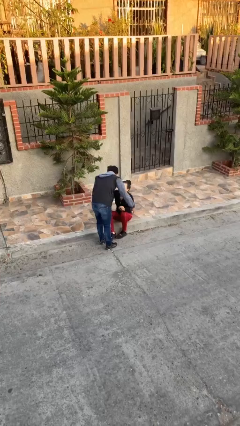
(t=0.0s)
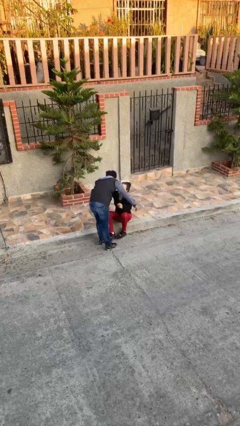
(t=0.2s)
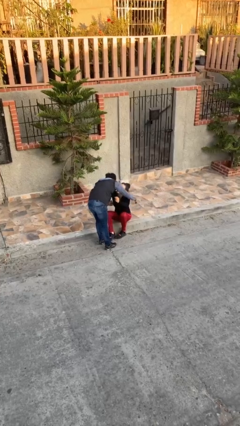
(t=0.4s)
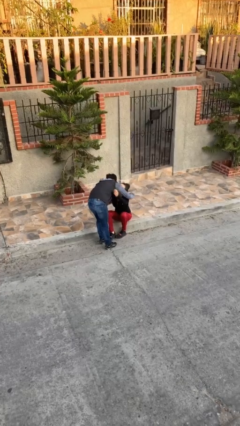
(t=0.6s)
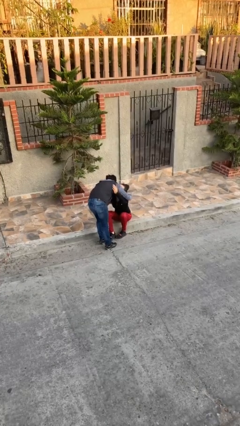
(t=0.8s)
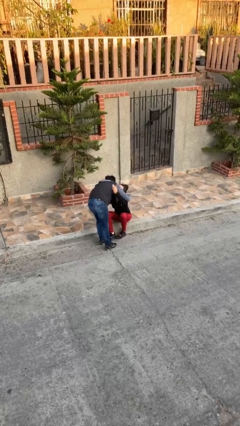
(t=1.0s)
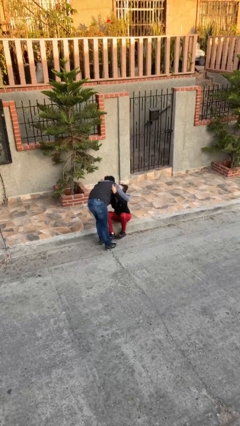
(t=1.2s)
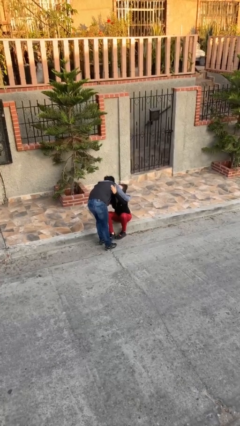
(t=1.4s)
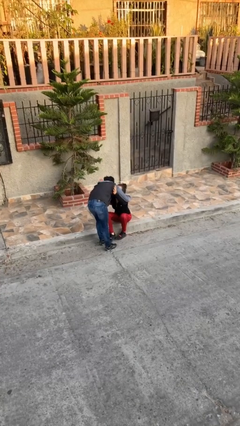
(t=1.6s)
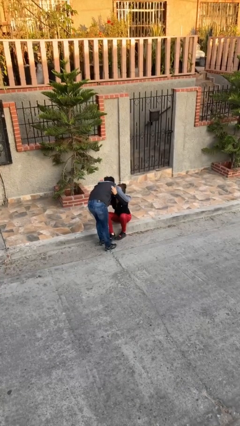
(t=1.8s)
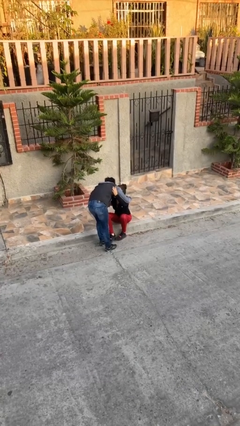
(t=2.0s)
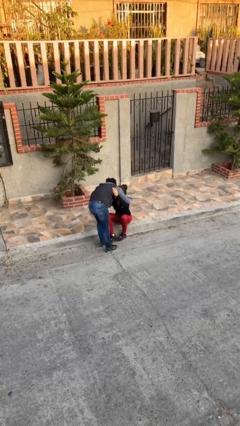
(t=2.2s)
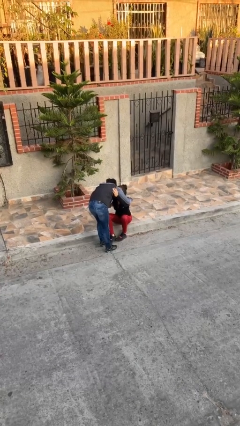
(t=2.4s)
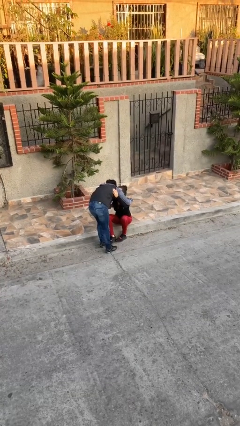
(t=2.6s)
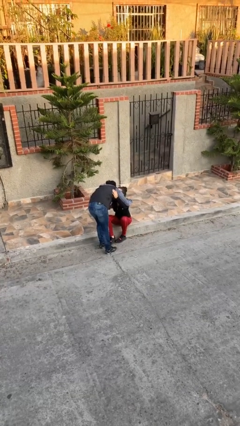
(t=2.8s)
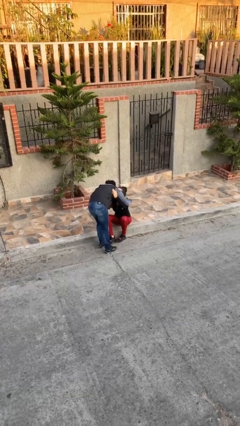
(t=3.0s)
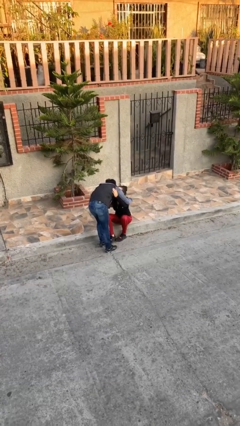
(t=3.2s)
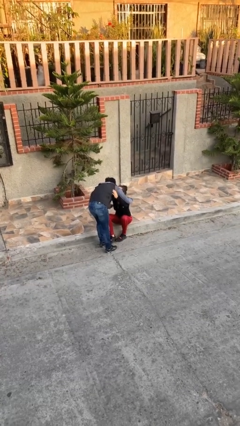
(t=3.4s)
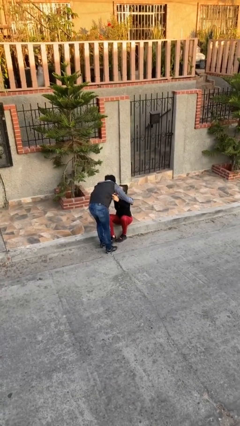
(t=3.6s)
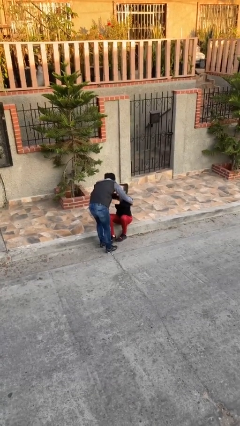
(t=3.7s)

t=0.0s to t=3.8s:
person embraces person

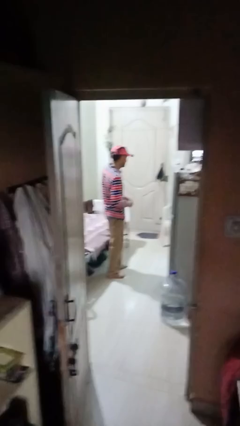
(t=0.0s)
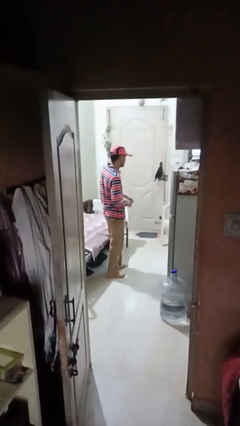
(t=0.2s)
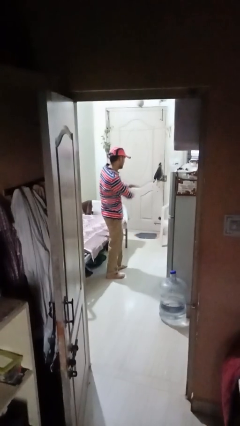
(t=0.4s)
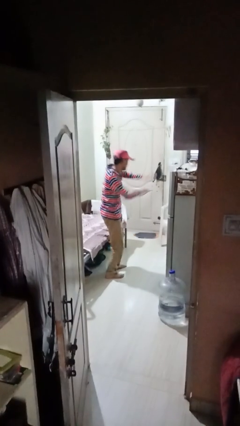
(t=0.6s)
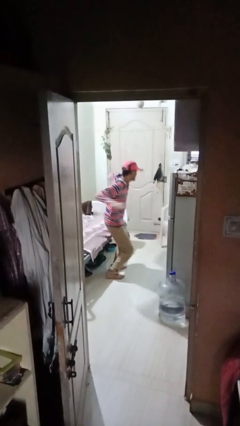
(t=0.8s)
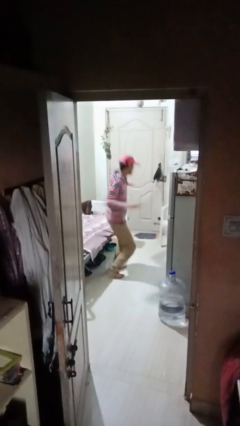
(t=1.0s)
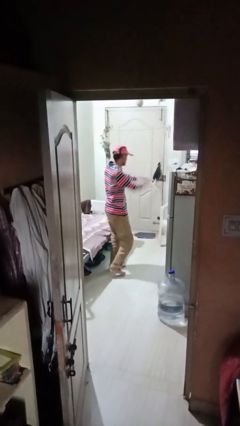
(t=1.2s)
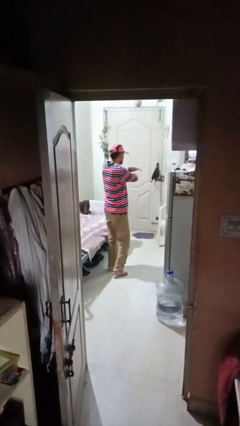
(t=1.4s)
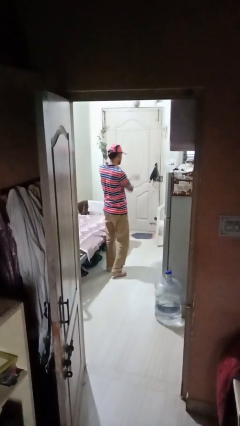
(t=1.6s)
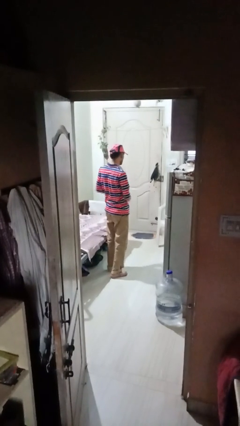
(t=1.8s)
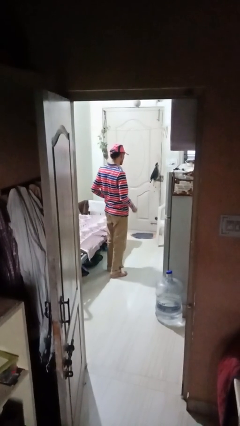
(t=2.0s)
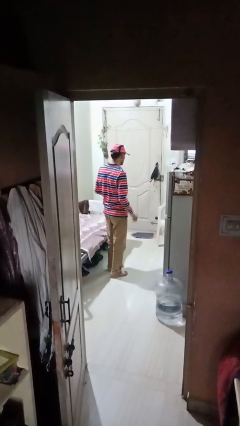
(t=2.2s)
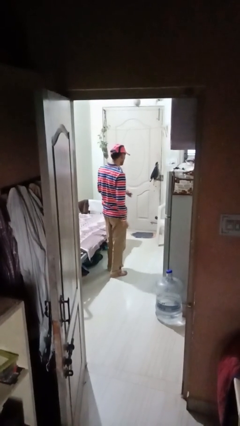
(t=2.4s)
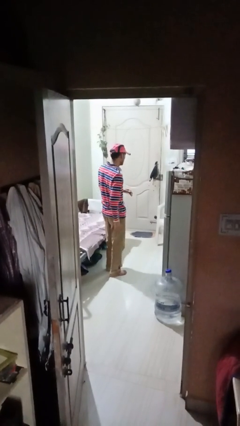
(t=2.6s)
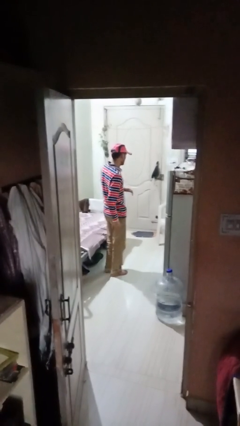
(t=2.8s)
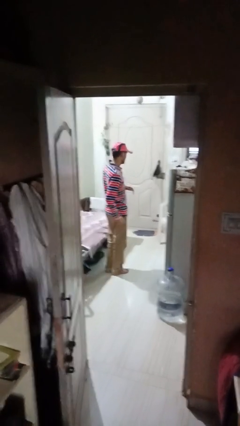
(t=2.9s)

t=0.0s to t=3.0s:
person karate chop

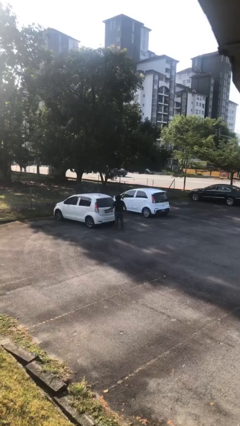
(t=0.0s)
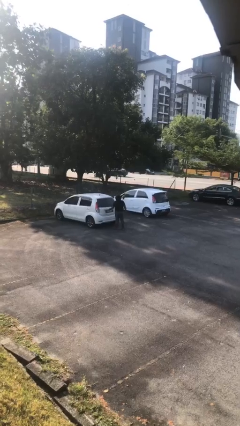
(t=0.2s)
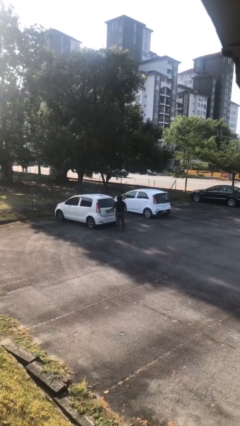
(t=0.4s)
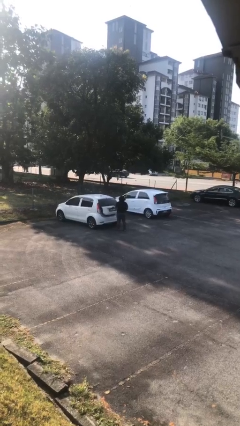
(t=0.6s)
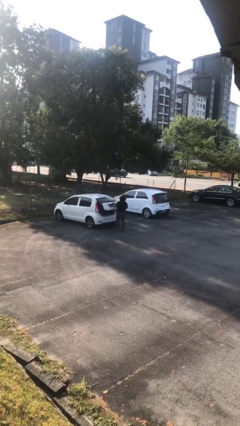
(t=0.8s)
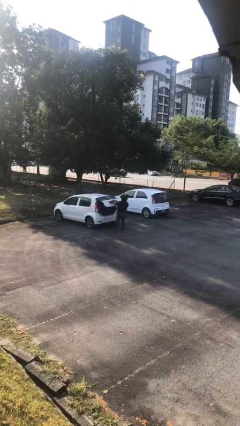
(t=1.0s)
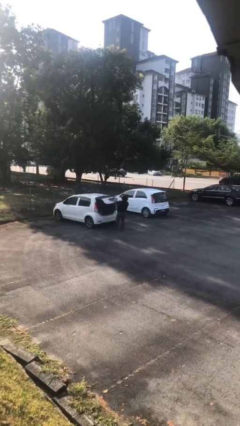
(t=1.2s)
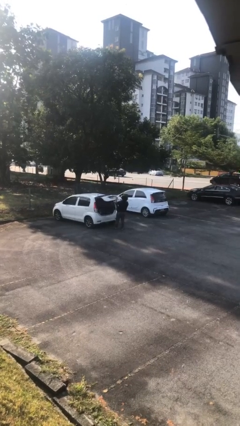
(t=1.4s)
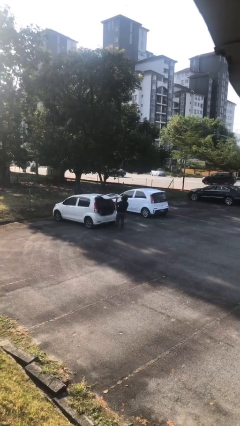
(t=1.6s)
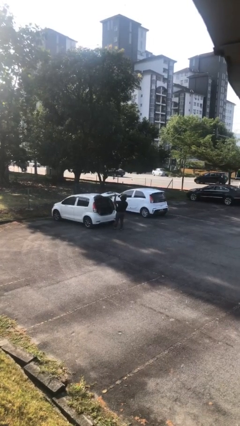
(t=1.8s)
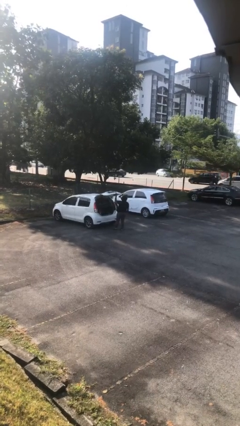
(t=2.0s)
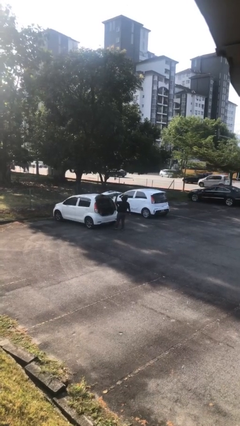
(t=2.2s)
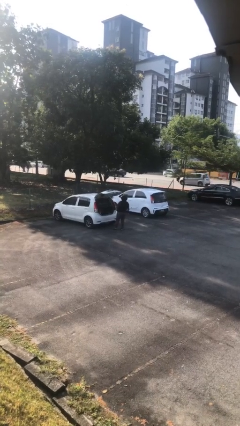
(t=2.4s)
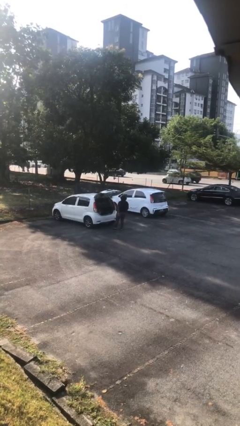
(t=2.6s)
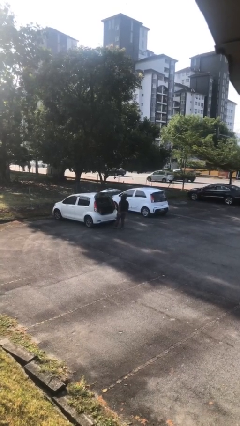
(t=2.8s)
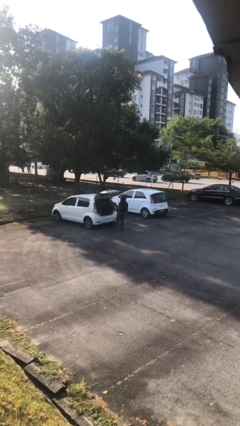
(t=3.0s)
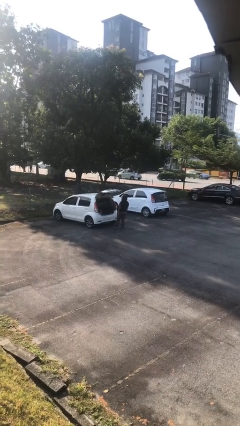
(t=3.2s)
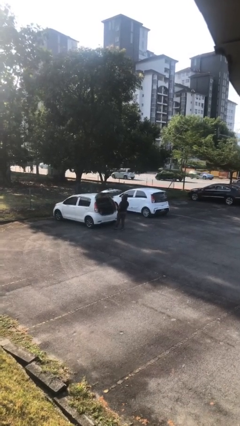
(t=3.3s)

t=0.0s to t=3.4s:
person opens car trunk

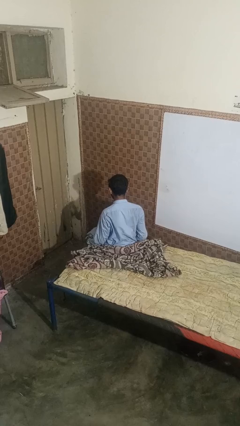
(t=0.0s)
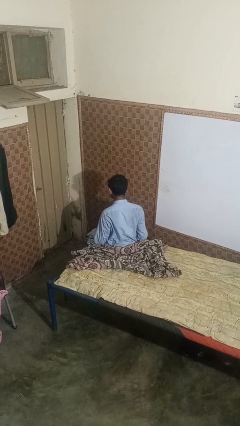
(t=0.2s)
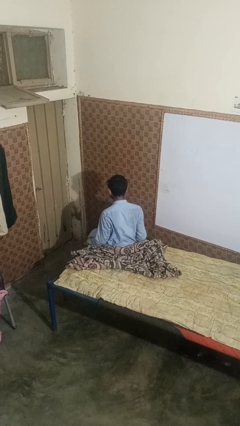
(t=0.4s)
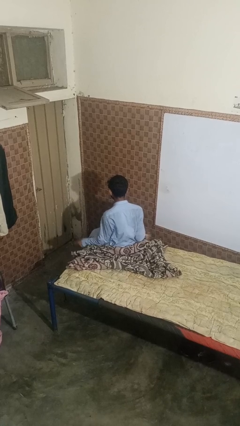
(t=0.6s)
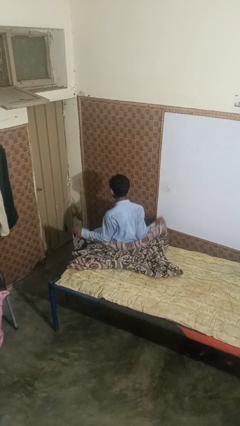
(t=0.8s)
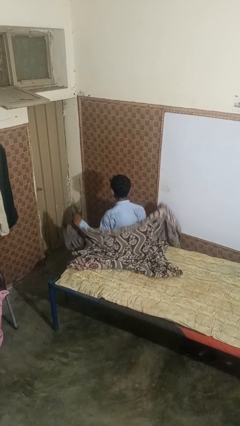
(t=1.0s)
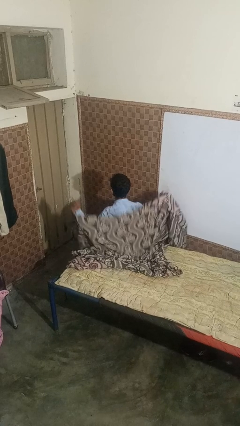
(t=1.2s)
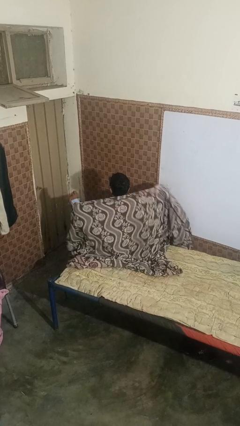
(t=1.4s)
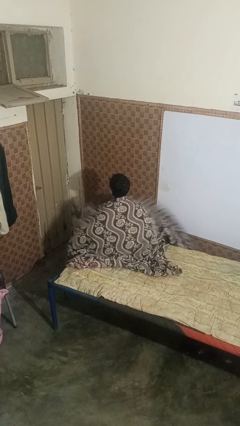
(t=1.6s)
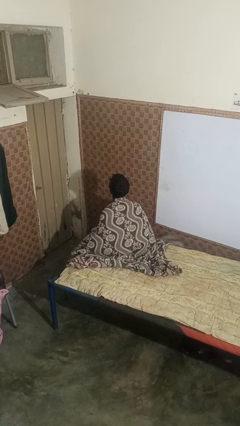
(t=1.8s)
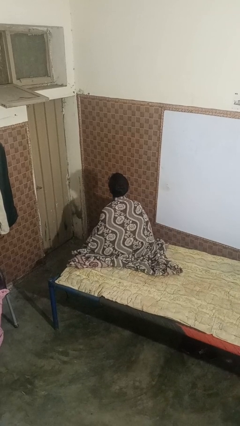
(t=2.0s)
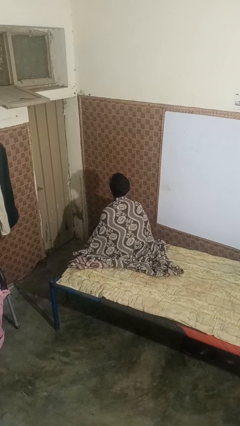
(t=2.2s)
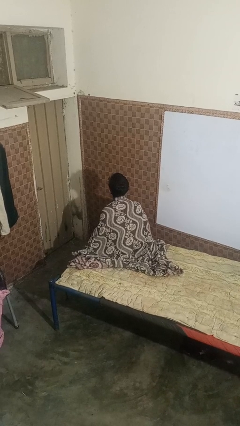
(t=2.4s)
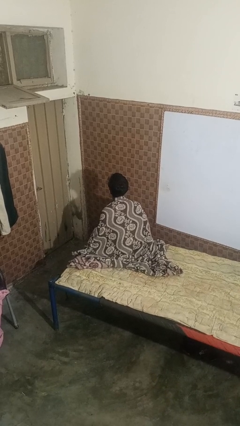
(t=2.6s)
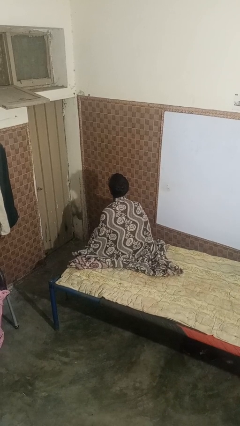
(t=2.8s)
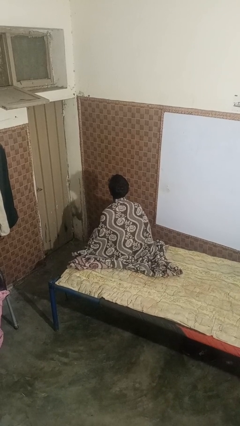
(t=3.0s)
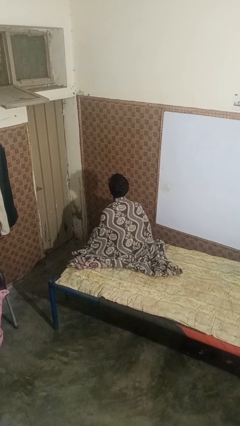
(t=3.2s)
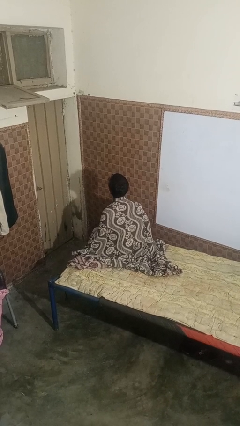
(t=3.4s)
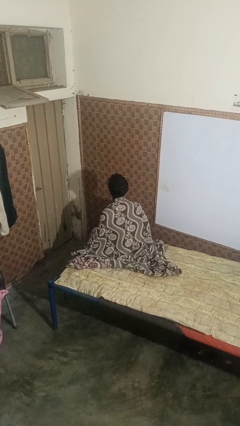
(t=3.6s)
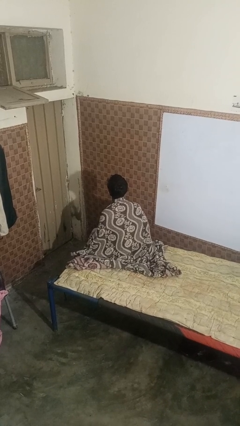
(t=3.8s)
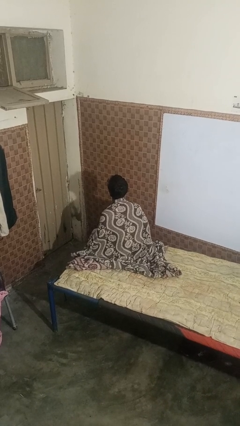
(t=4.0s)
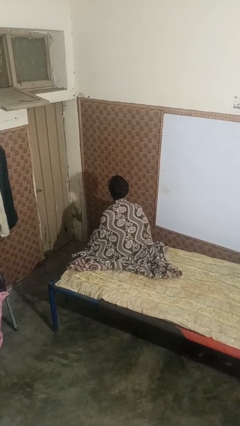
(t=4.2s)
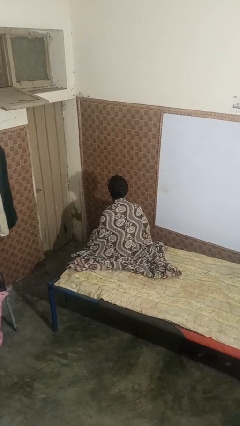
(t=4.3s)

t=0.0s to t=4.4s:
person covers with bedsheets

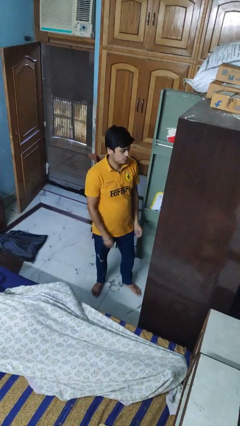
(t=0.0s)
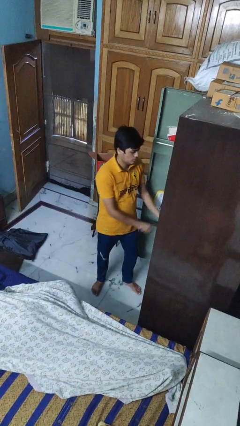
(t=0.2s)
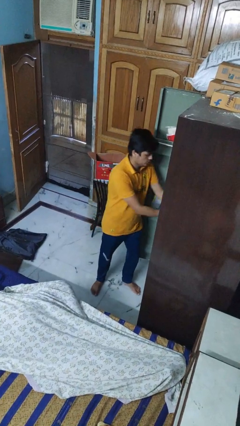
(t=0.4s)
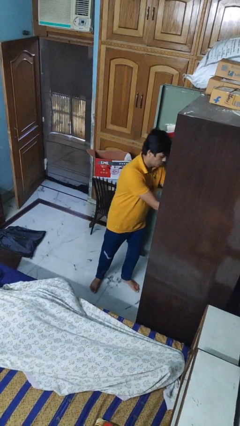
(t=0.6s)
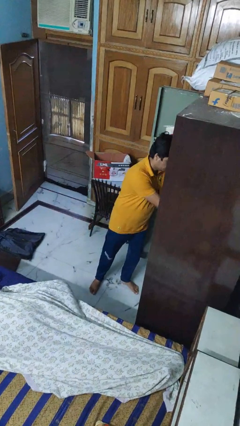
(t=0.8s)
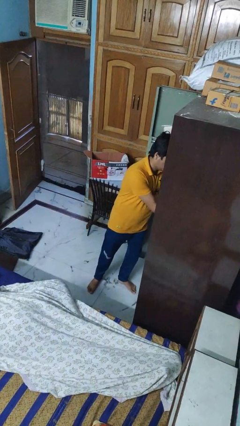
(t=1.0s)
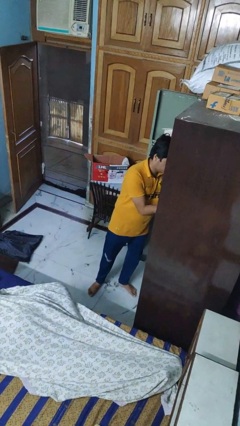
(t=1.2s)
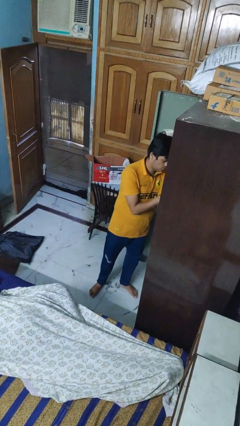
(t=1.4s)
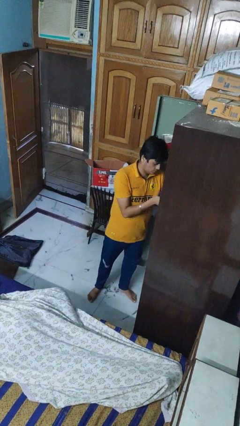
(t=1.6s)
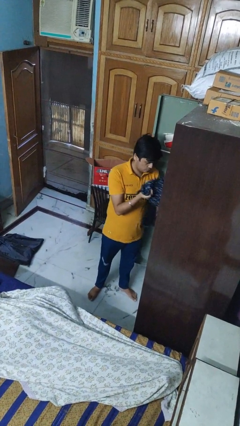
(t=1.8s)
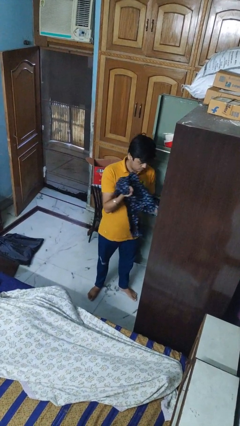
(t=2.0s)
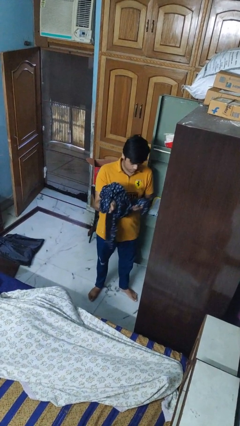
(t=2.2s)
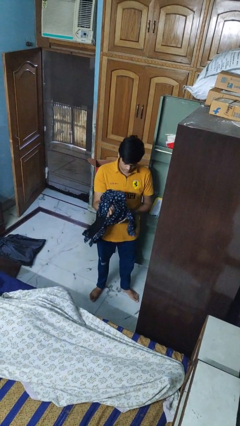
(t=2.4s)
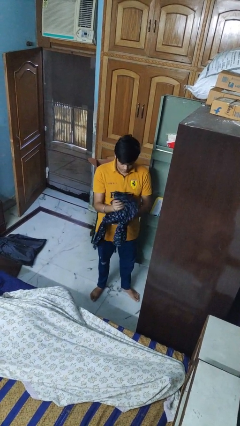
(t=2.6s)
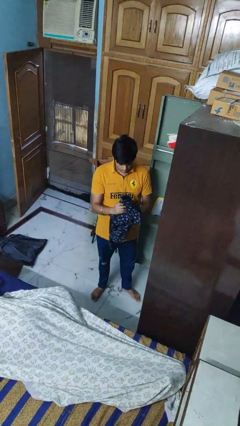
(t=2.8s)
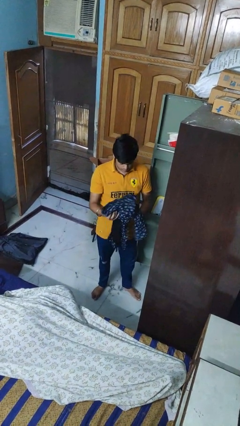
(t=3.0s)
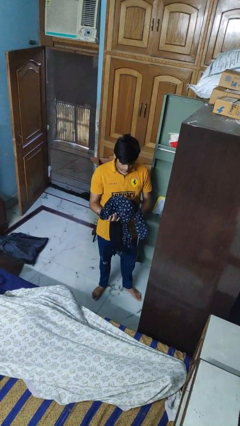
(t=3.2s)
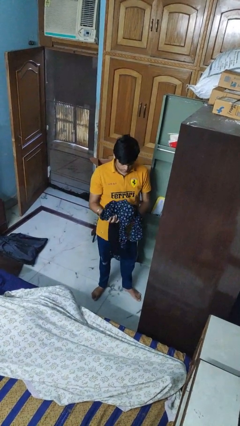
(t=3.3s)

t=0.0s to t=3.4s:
person takes clothes from dresser
